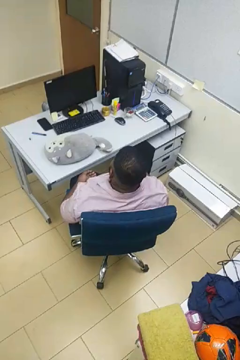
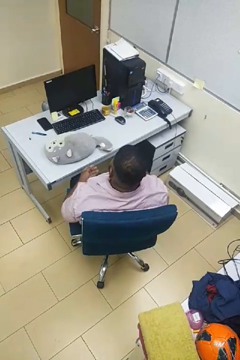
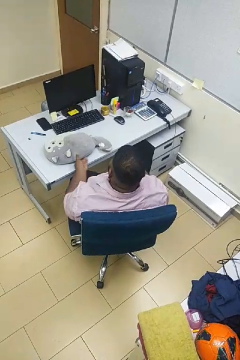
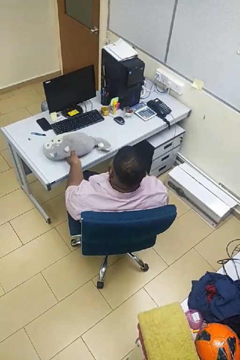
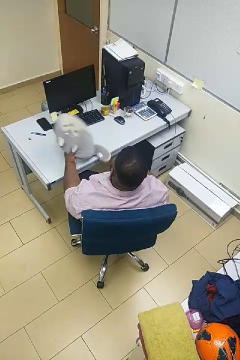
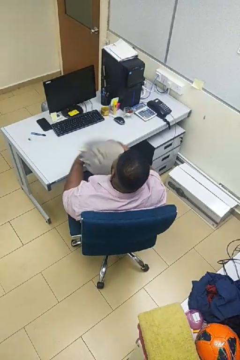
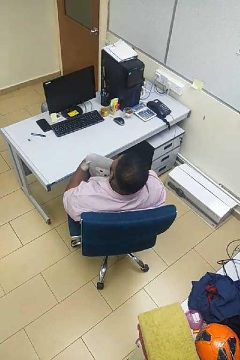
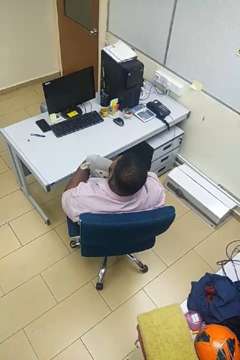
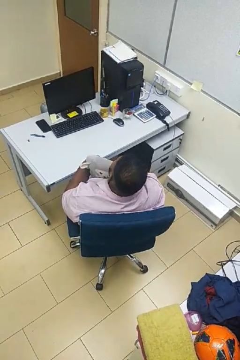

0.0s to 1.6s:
person hugs stuffed animal

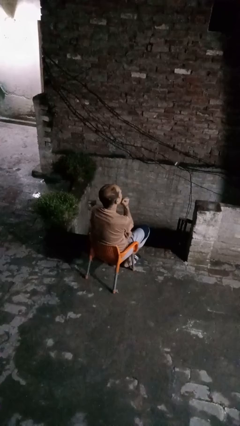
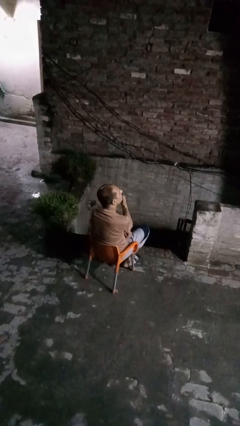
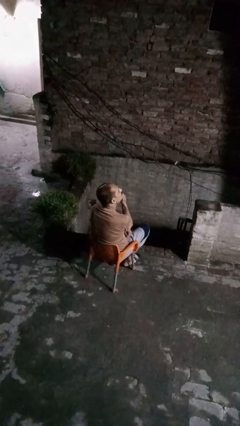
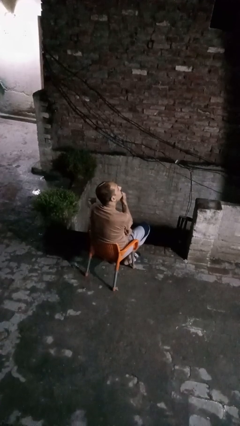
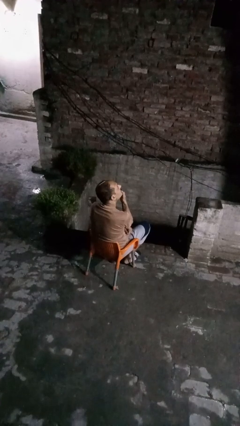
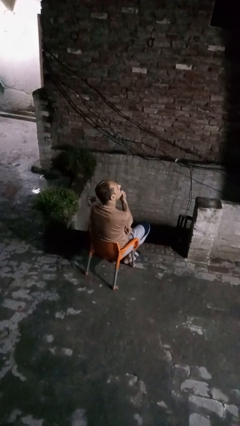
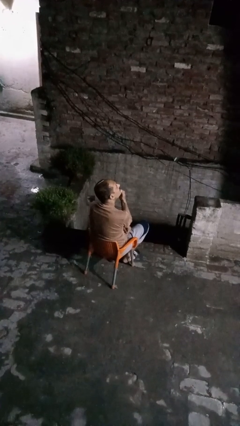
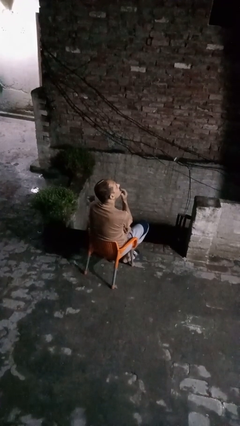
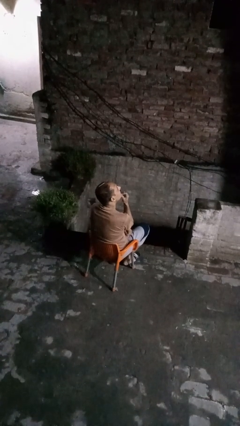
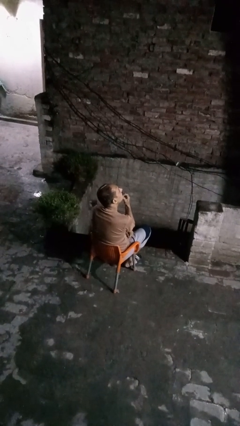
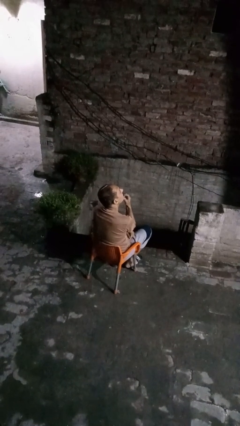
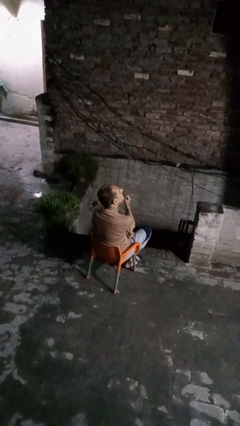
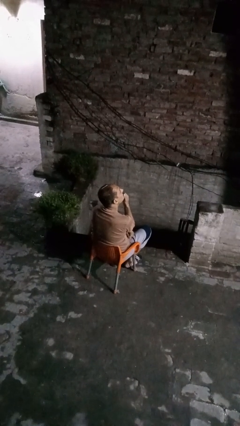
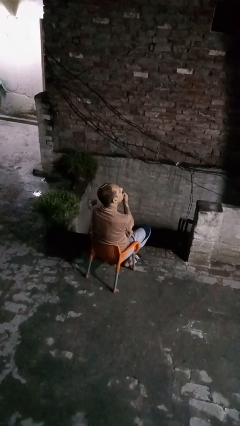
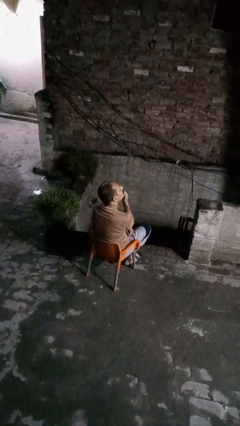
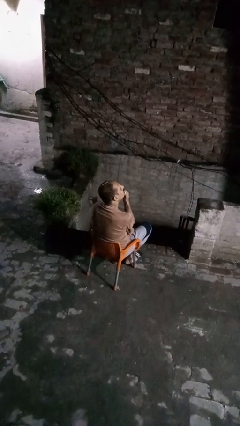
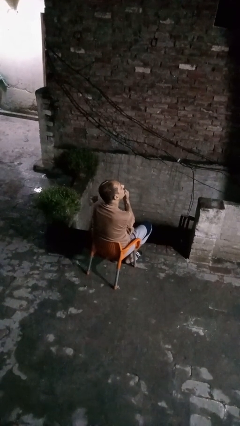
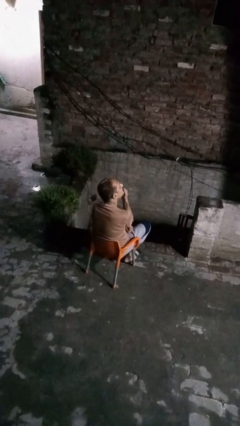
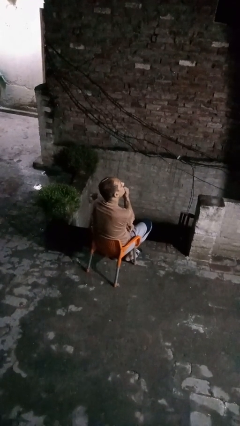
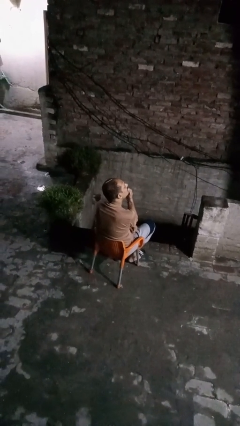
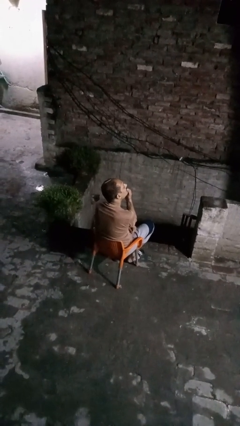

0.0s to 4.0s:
person strokes chin

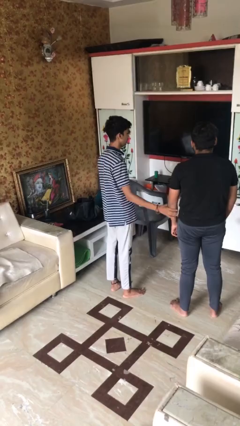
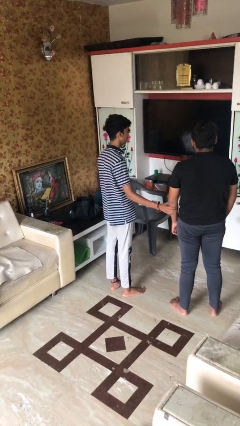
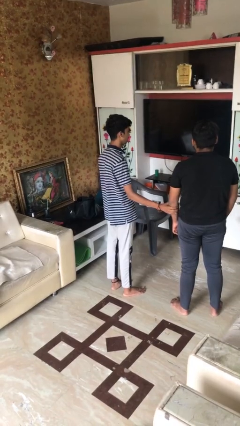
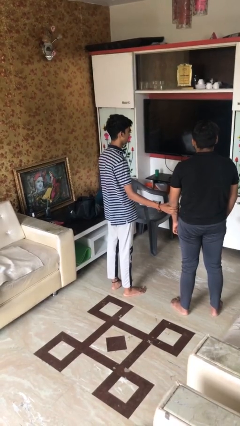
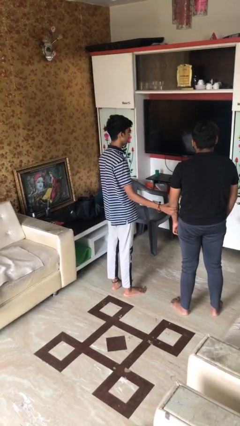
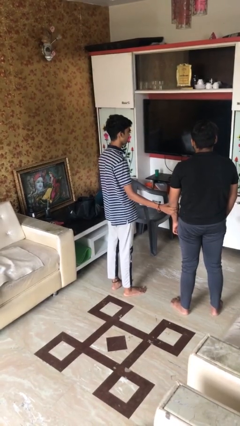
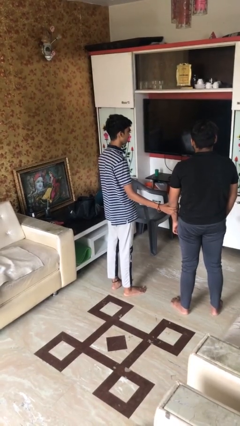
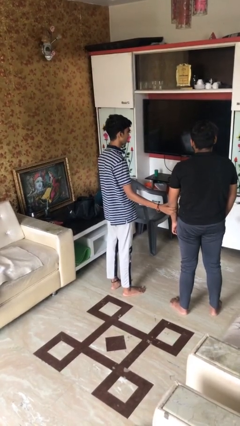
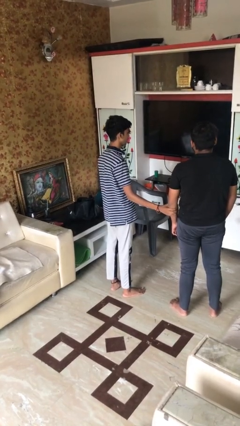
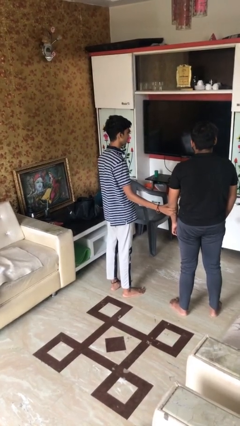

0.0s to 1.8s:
person grabs person by forearm

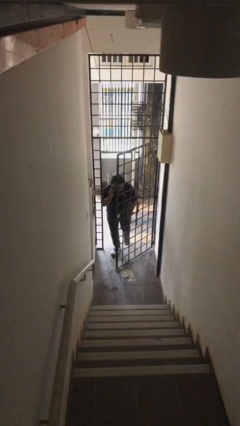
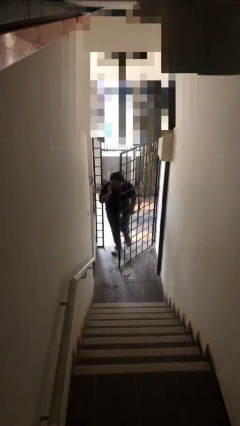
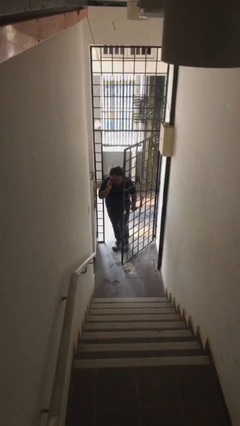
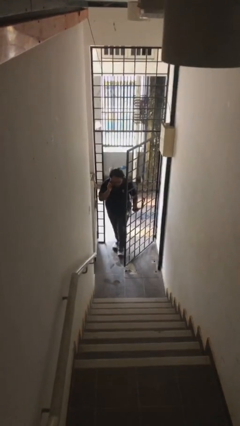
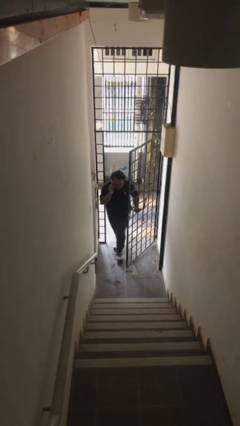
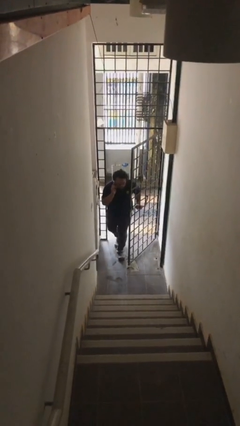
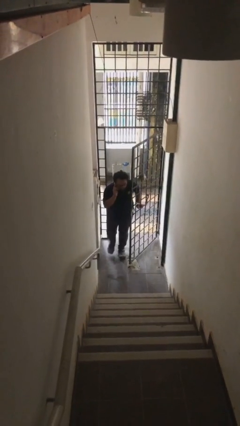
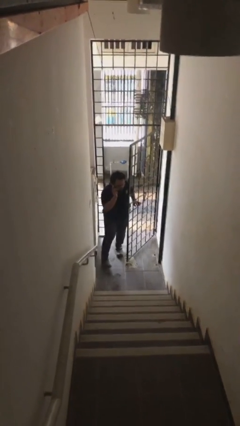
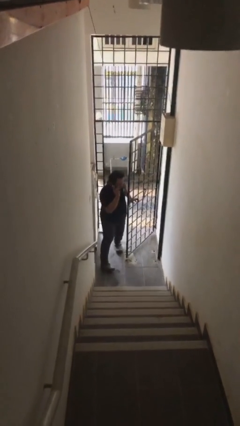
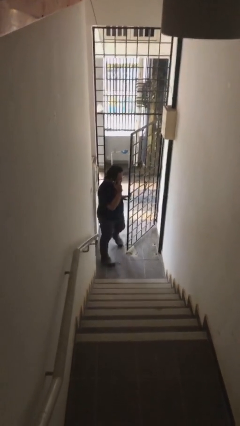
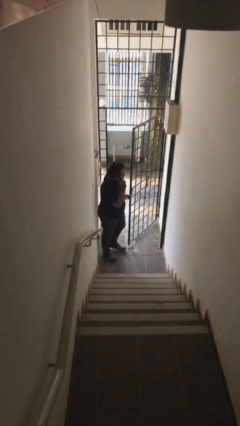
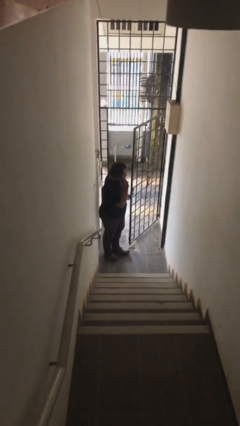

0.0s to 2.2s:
person enters scene through structure

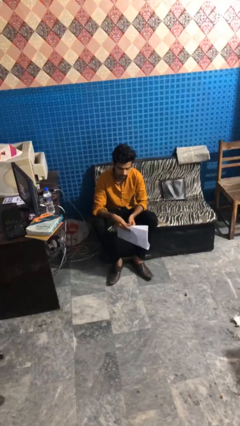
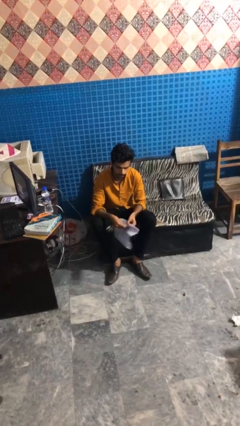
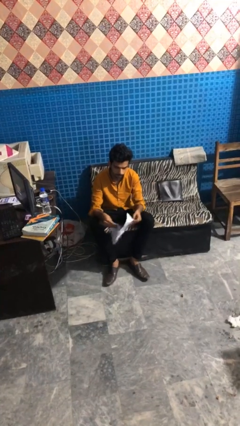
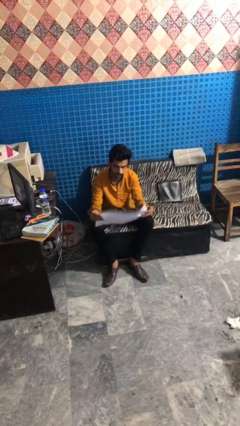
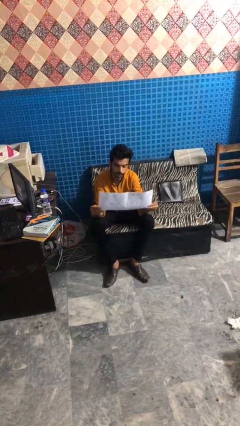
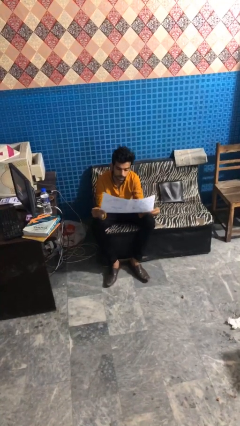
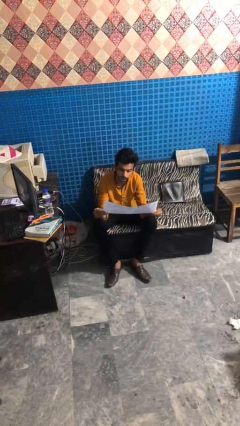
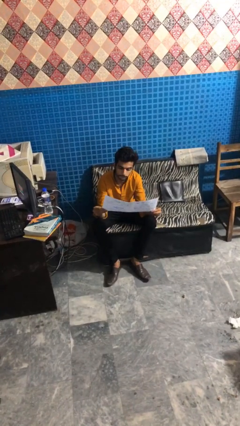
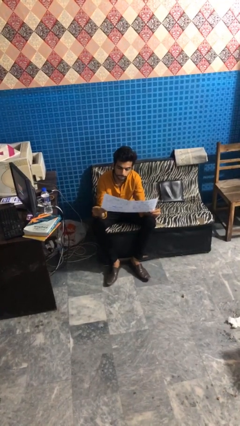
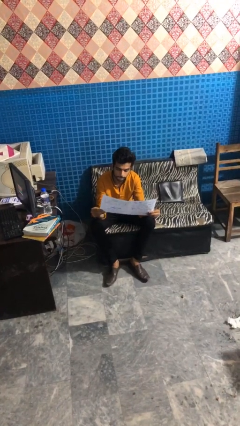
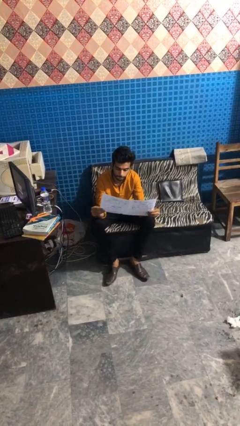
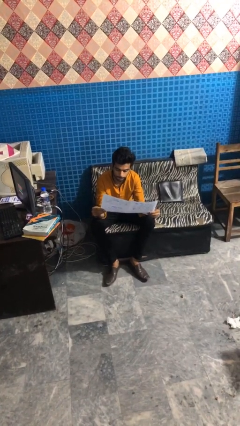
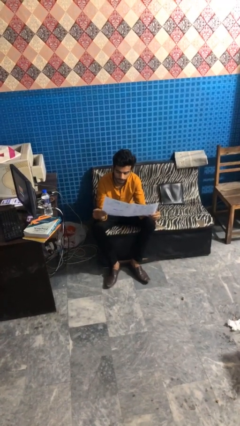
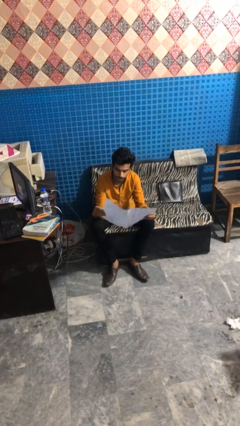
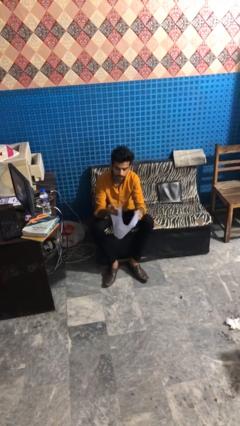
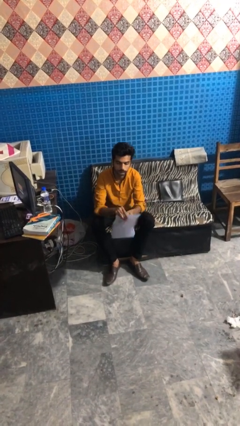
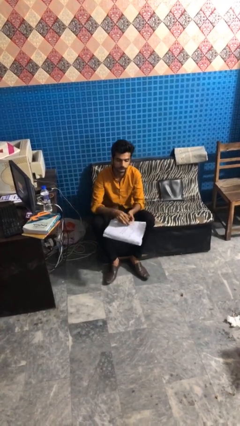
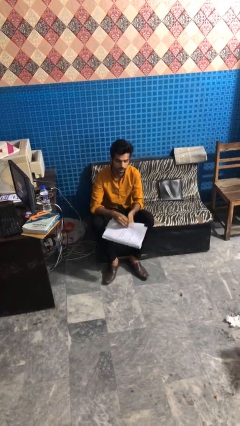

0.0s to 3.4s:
person reads newspaper

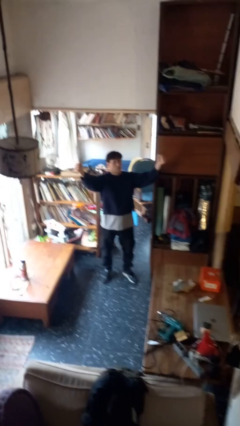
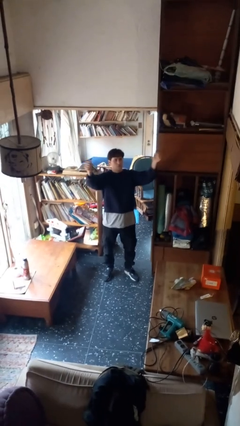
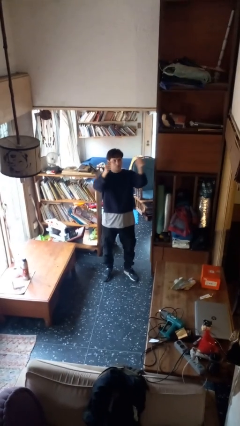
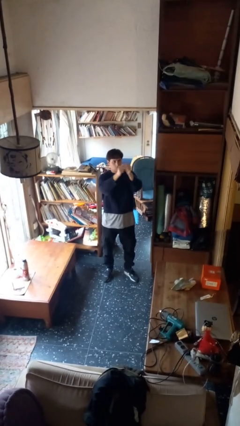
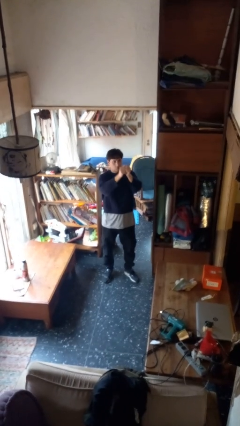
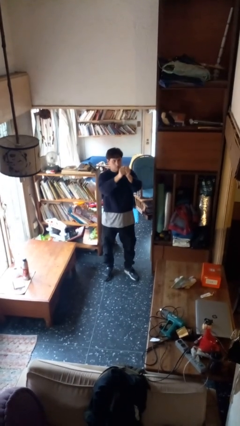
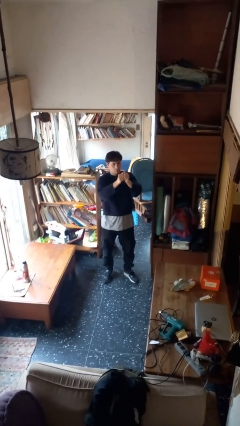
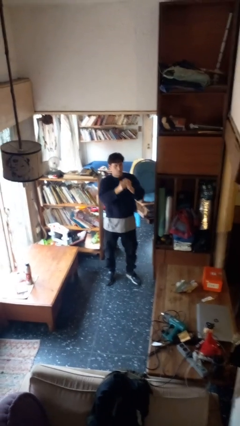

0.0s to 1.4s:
person gestures zoom out

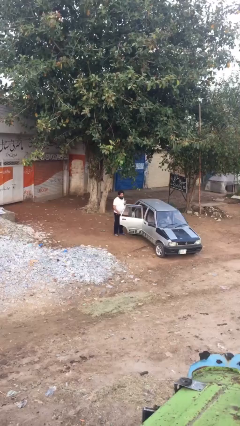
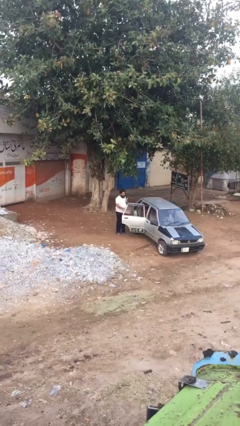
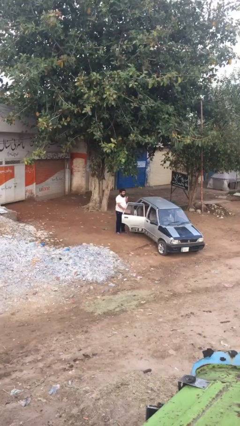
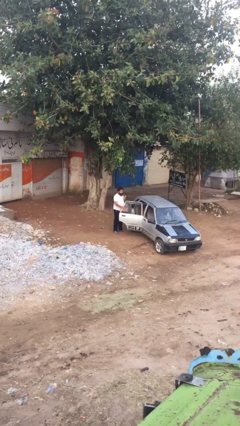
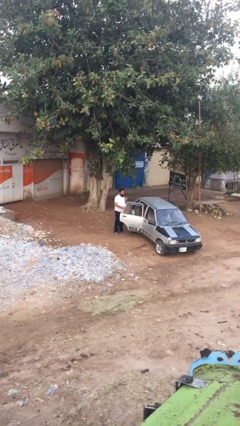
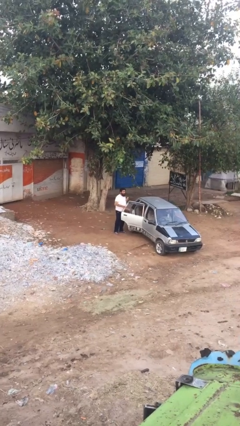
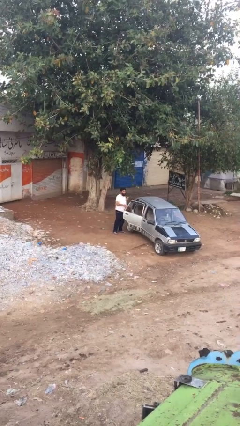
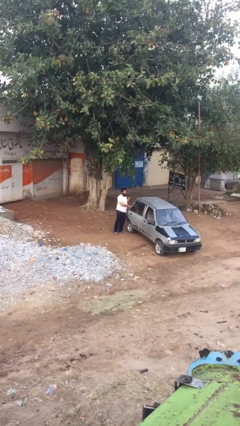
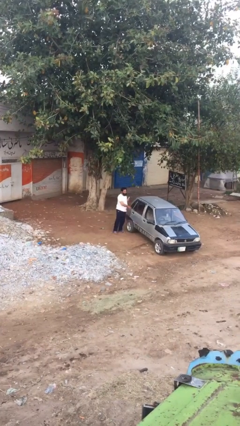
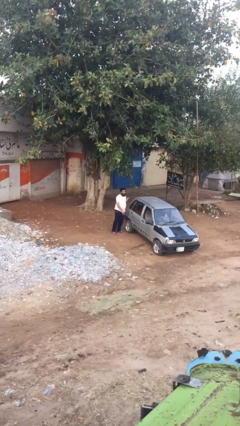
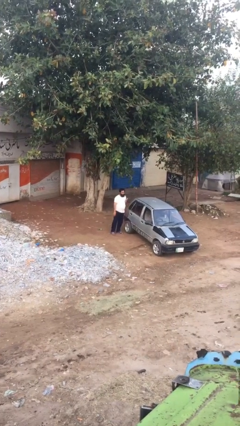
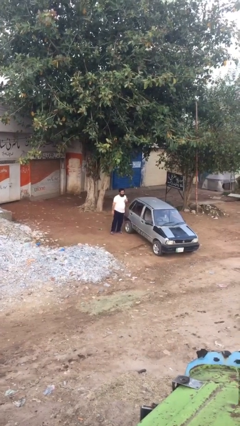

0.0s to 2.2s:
person closes car door

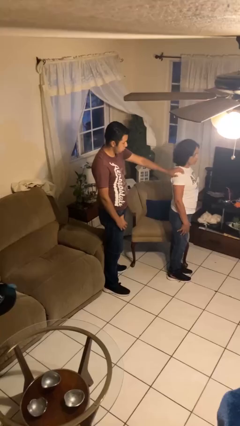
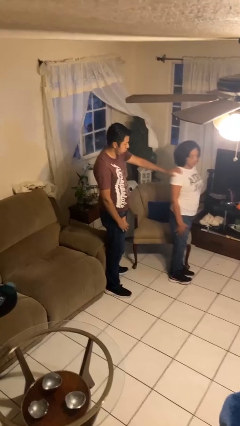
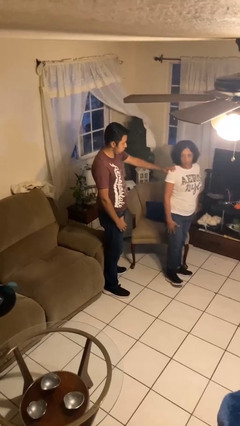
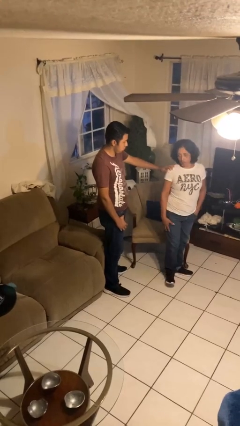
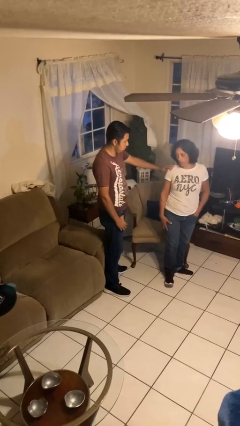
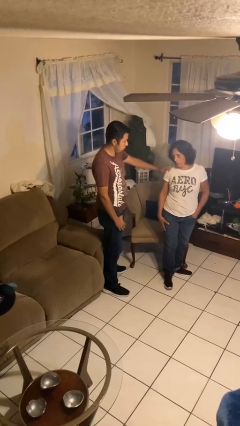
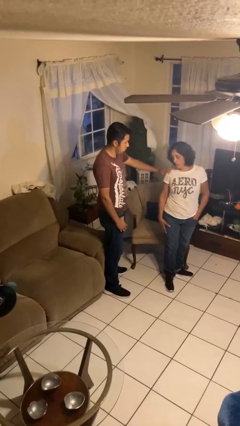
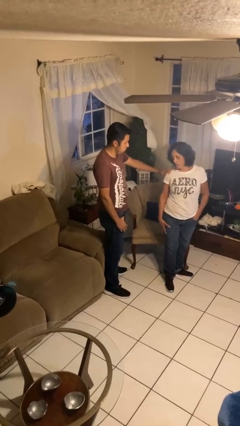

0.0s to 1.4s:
person spins person around
